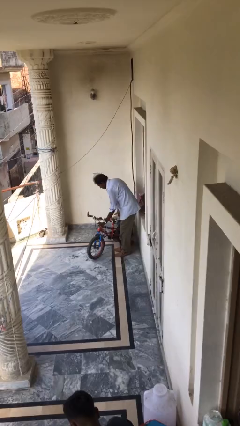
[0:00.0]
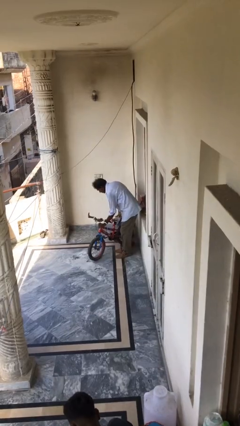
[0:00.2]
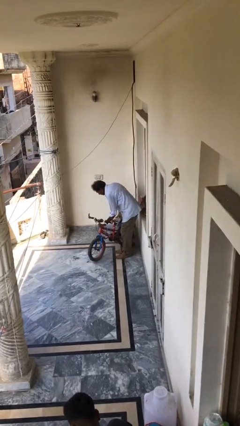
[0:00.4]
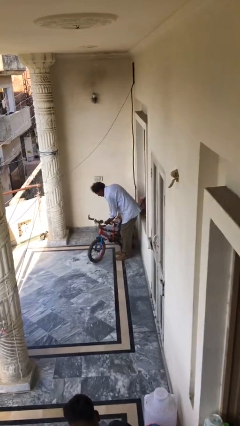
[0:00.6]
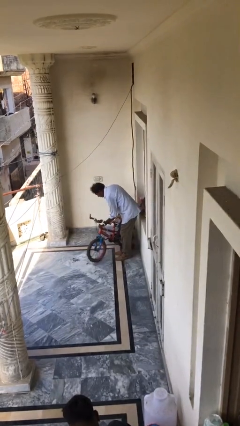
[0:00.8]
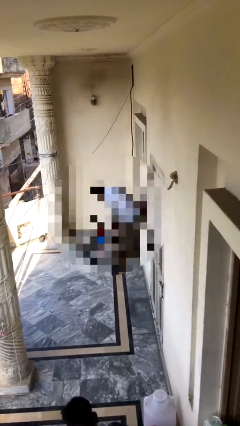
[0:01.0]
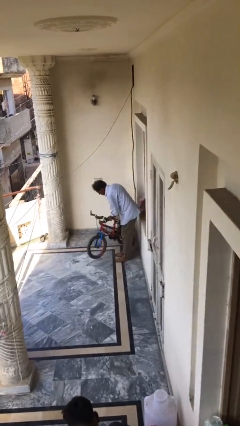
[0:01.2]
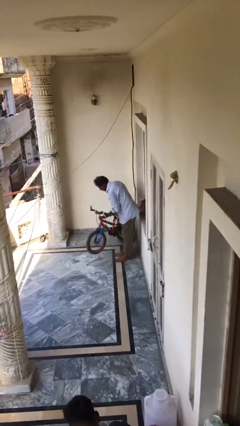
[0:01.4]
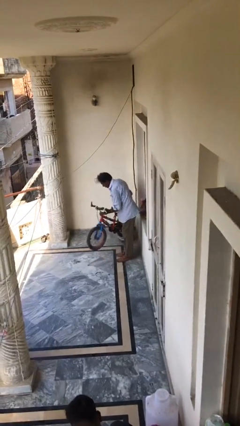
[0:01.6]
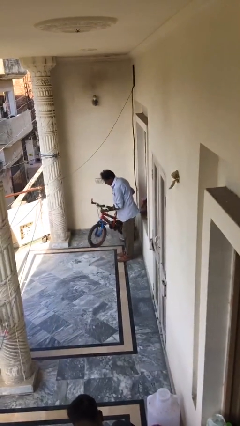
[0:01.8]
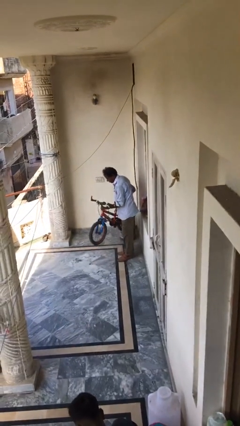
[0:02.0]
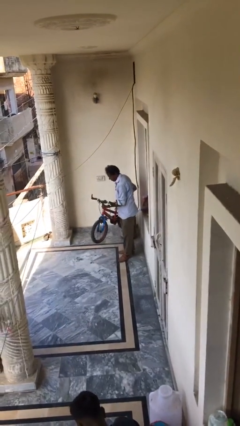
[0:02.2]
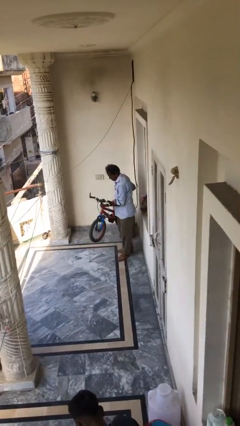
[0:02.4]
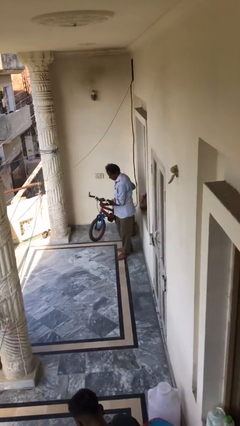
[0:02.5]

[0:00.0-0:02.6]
person picks up object from floor

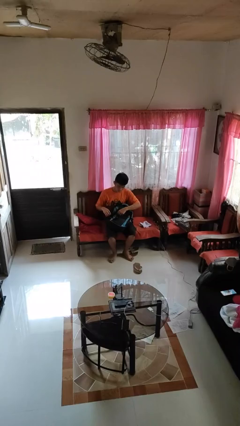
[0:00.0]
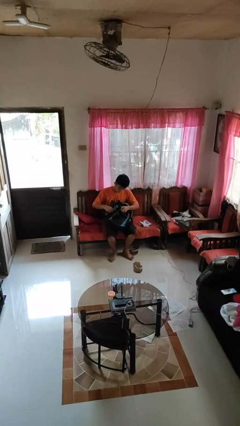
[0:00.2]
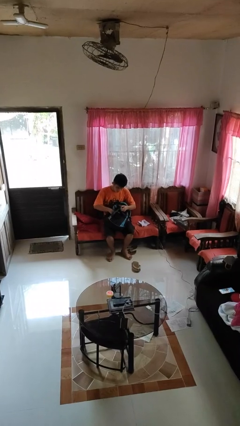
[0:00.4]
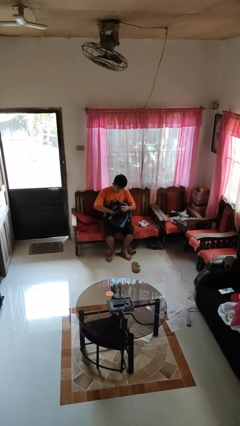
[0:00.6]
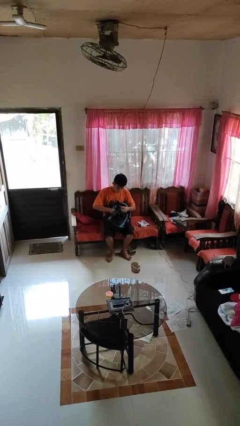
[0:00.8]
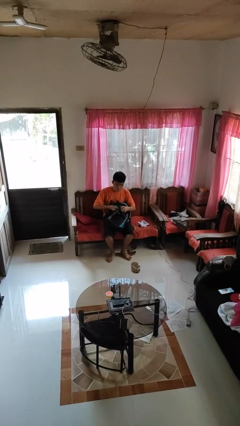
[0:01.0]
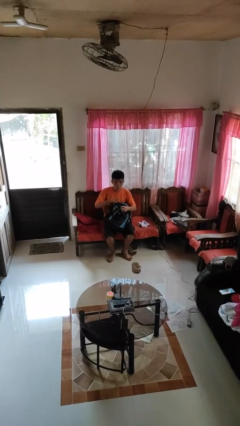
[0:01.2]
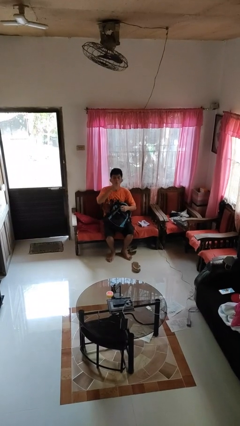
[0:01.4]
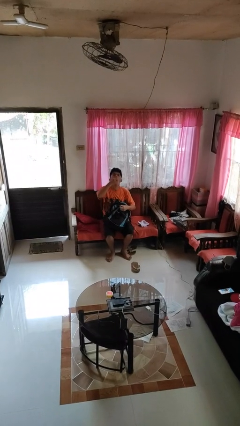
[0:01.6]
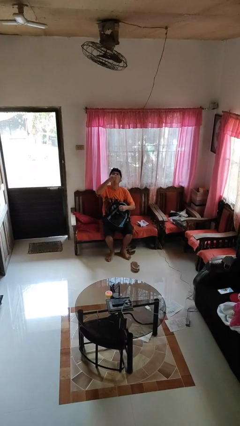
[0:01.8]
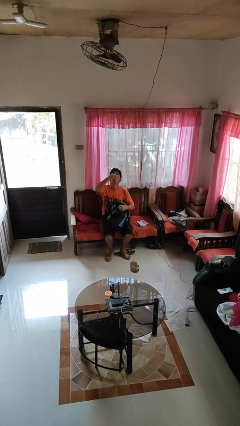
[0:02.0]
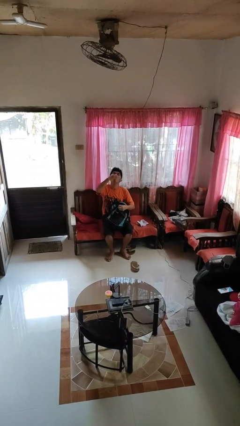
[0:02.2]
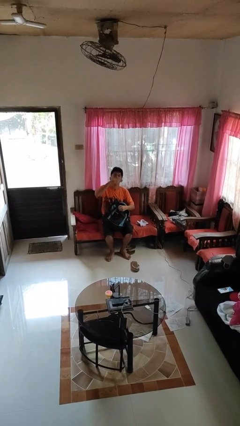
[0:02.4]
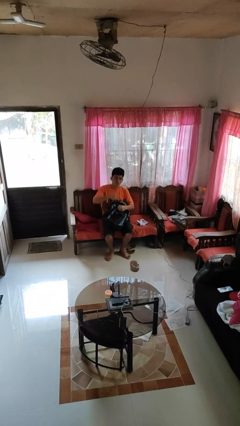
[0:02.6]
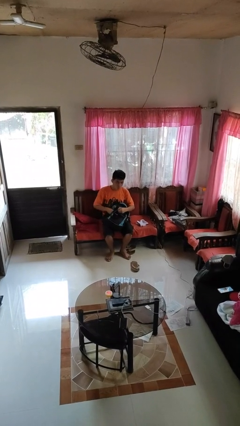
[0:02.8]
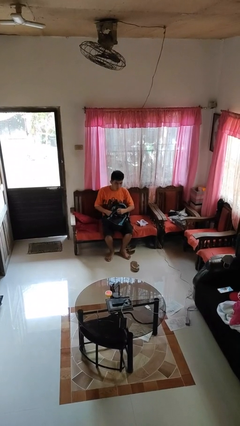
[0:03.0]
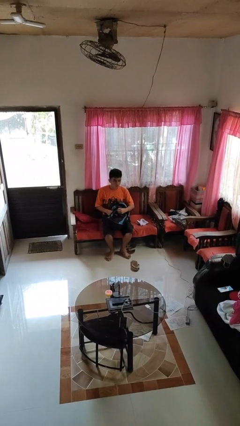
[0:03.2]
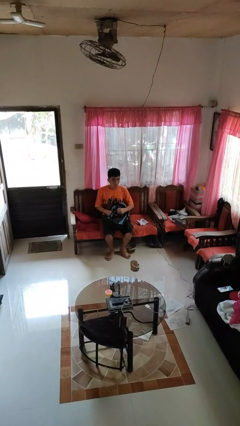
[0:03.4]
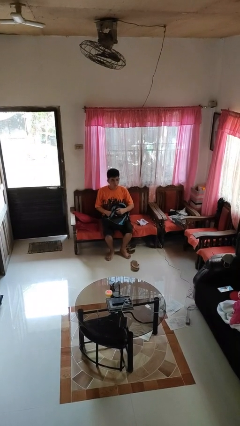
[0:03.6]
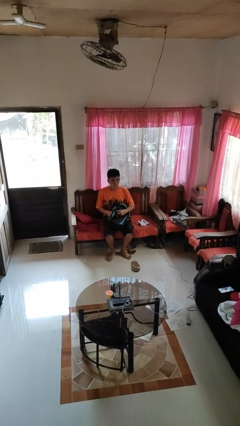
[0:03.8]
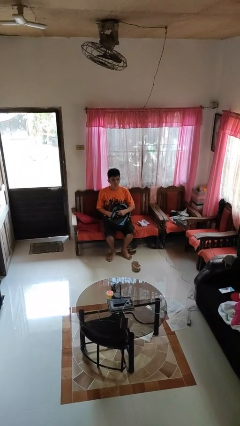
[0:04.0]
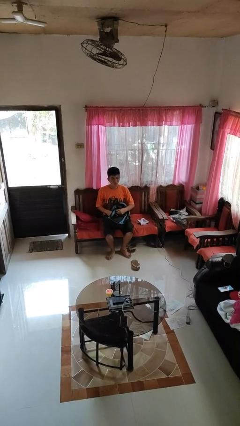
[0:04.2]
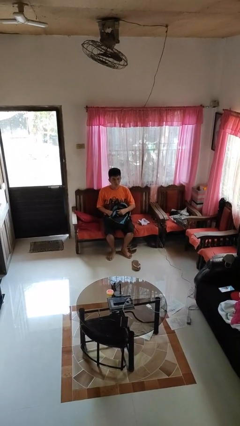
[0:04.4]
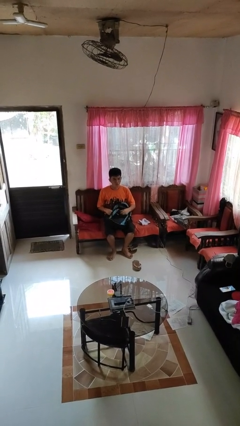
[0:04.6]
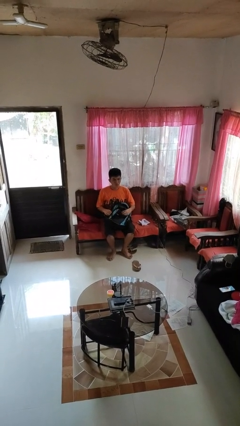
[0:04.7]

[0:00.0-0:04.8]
person eats snack from bag

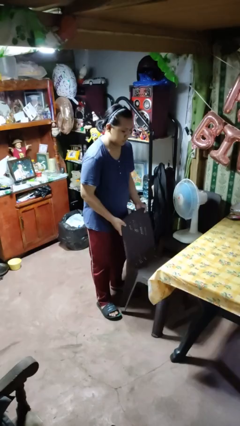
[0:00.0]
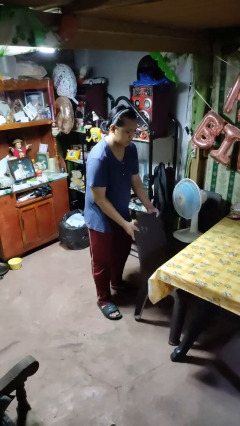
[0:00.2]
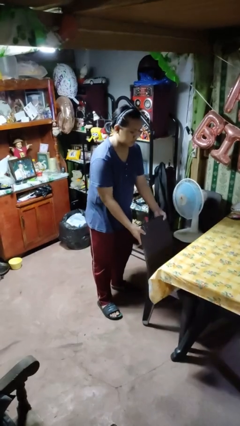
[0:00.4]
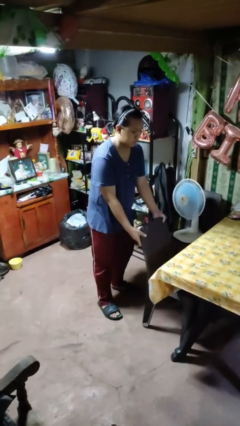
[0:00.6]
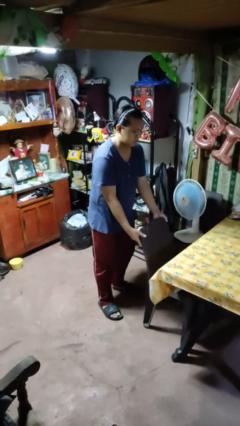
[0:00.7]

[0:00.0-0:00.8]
person pushes in chair

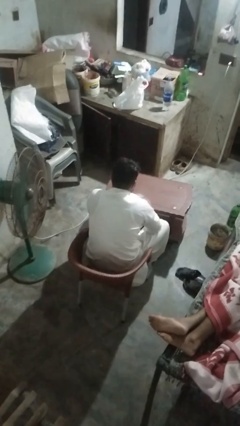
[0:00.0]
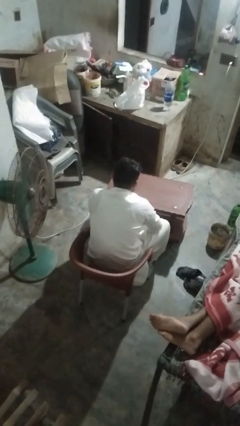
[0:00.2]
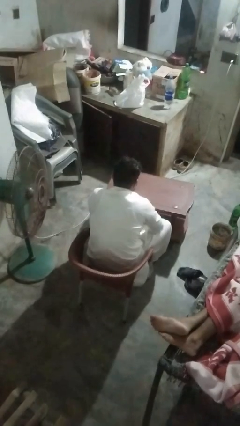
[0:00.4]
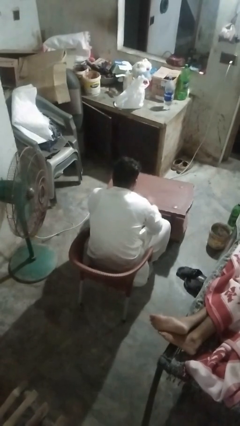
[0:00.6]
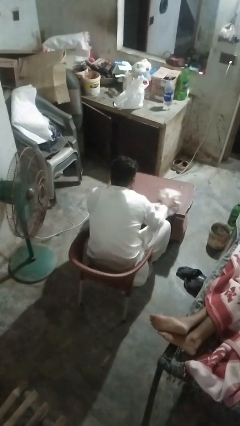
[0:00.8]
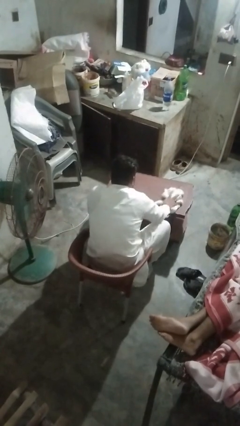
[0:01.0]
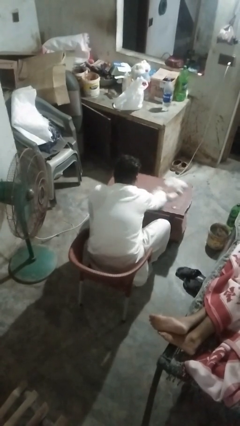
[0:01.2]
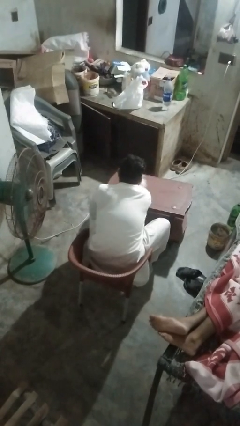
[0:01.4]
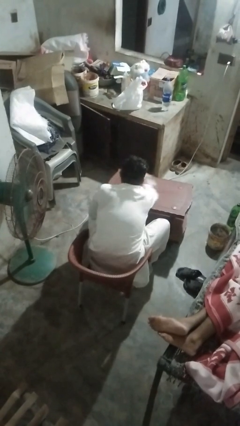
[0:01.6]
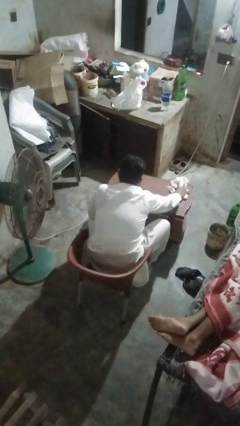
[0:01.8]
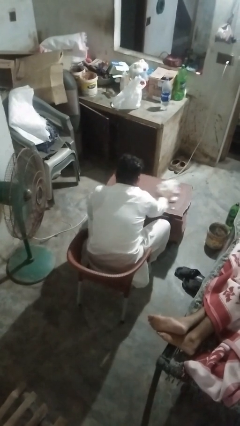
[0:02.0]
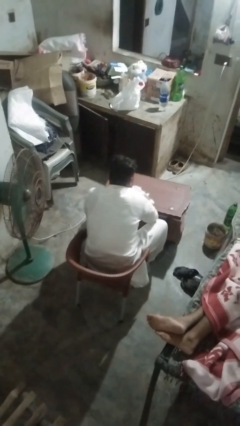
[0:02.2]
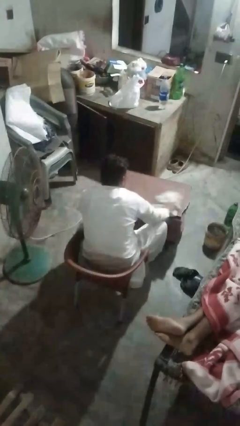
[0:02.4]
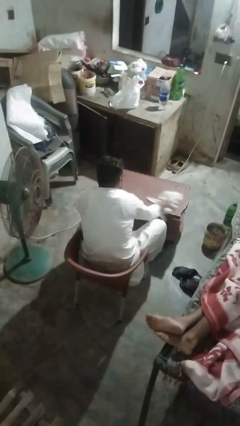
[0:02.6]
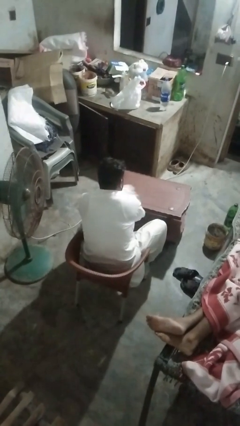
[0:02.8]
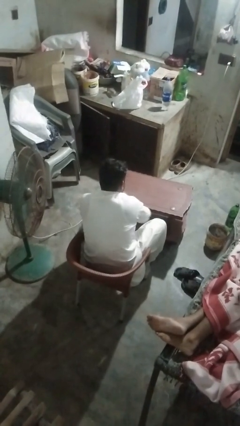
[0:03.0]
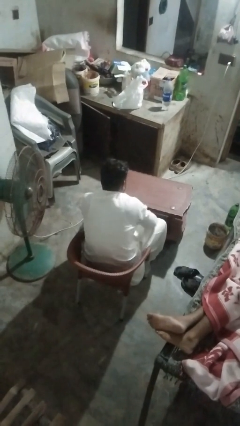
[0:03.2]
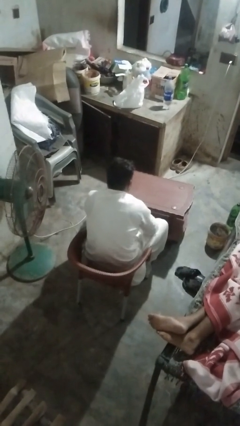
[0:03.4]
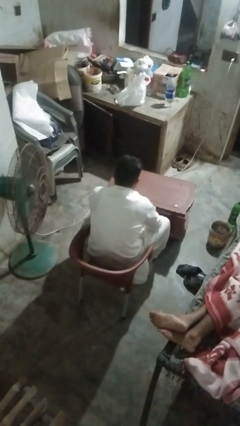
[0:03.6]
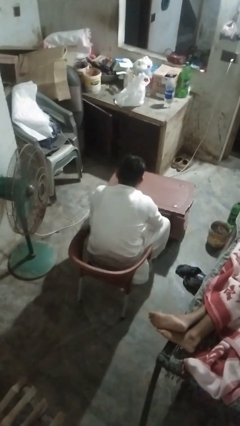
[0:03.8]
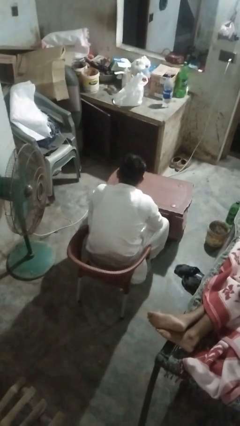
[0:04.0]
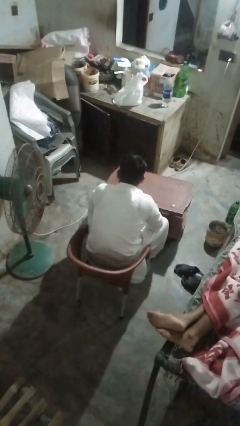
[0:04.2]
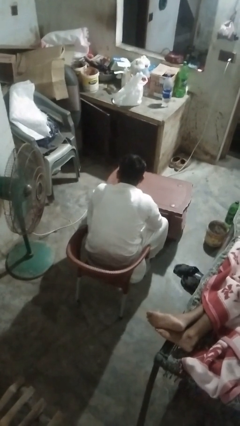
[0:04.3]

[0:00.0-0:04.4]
person cleans table with rag

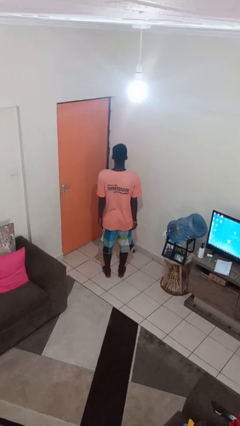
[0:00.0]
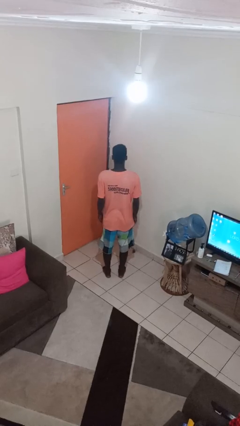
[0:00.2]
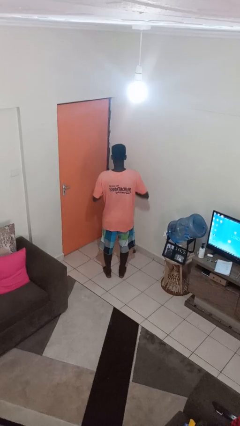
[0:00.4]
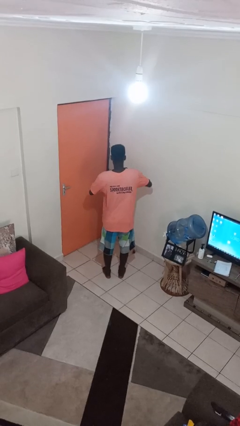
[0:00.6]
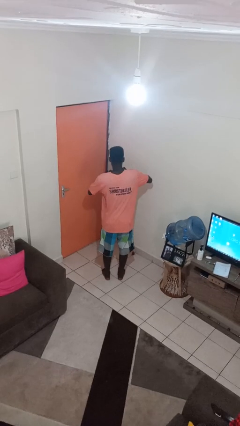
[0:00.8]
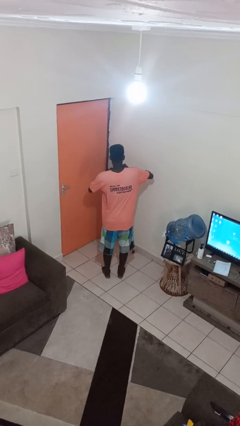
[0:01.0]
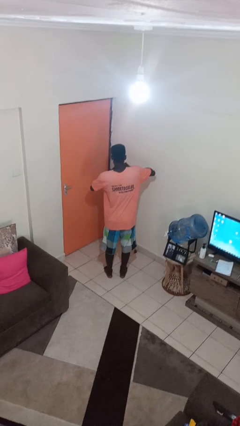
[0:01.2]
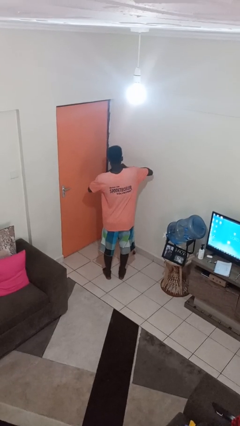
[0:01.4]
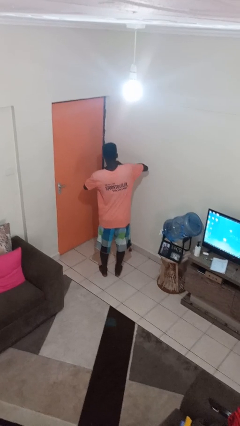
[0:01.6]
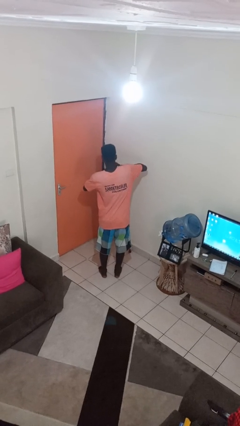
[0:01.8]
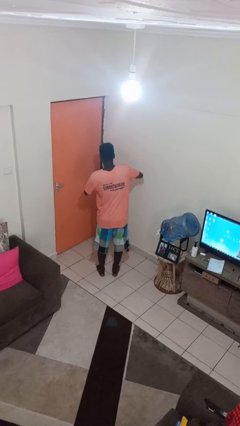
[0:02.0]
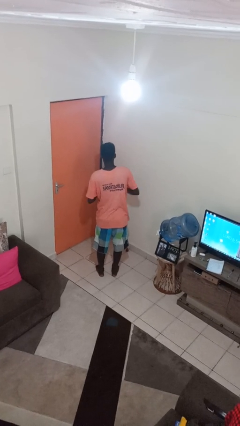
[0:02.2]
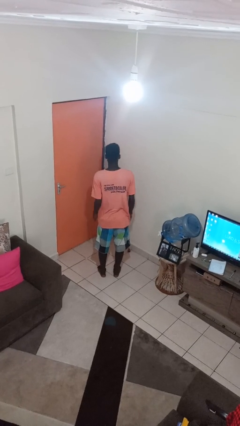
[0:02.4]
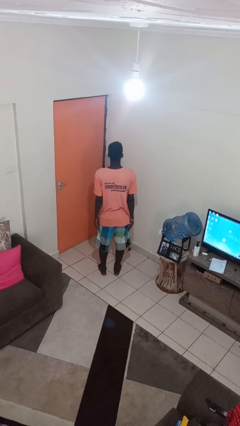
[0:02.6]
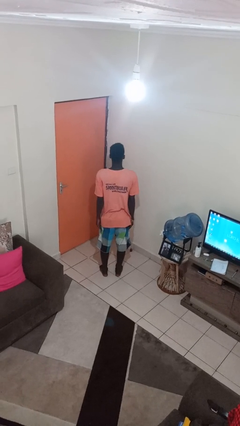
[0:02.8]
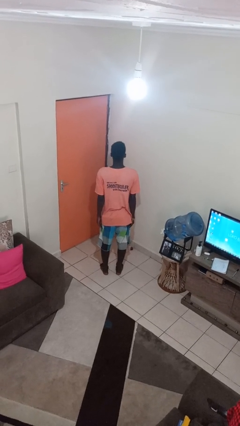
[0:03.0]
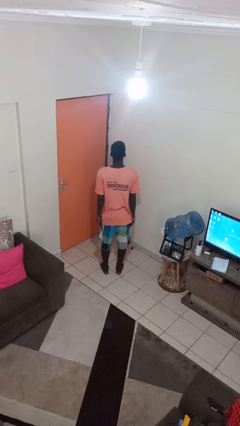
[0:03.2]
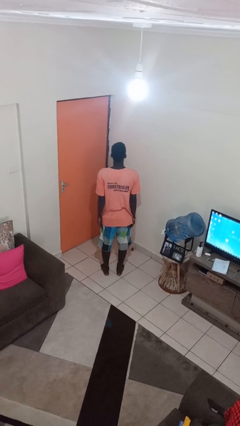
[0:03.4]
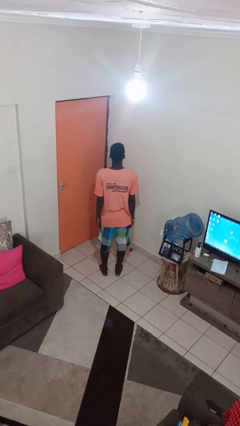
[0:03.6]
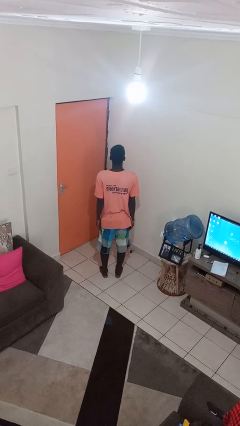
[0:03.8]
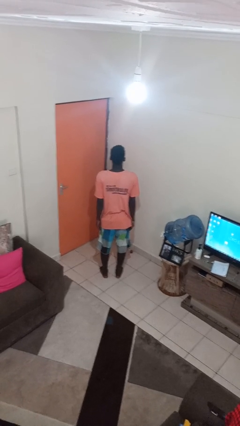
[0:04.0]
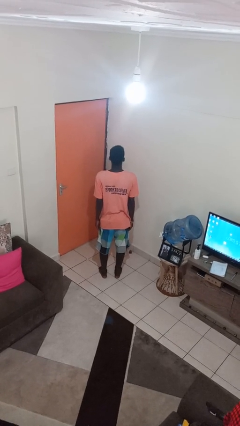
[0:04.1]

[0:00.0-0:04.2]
person puts on ring

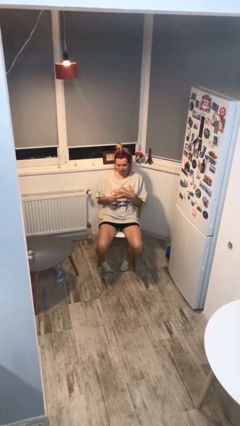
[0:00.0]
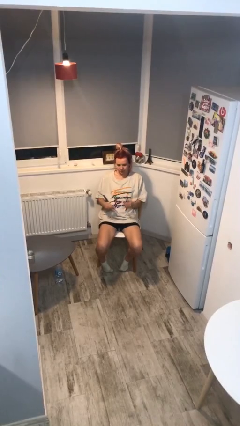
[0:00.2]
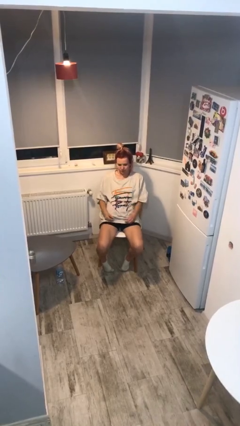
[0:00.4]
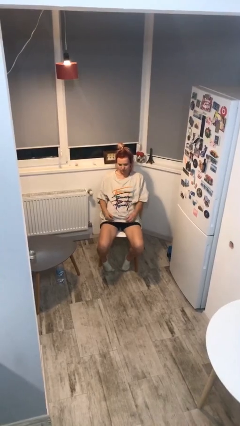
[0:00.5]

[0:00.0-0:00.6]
person takes off ring
